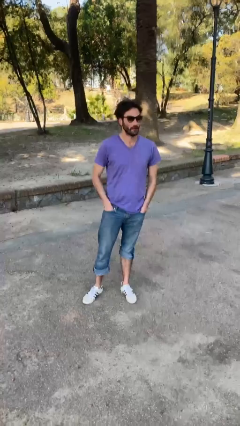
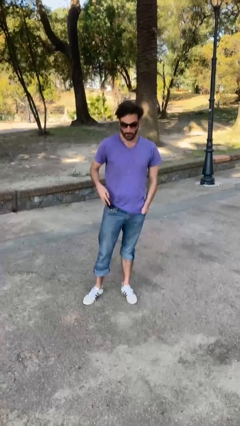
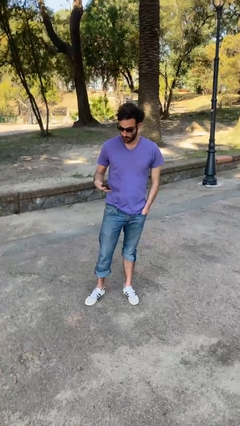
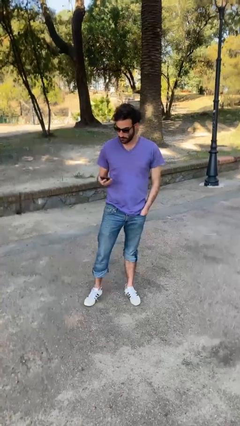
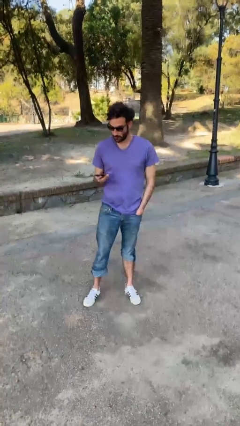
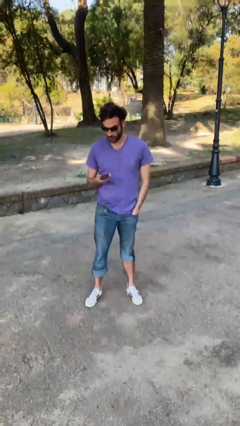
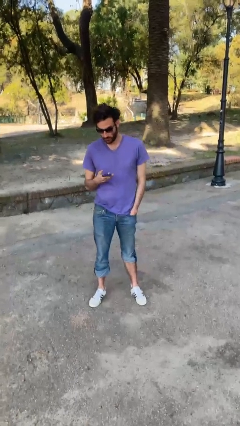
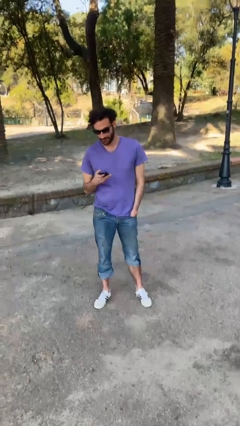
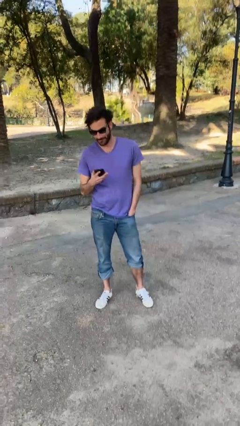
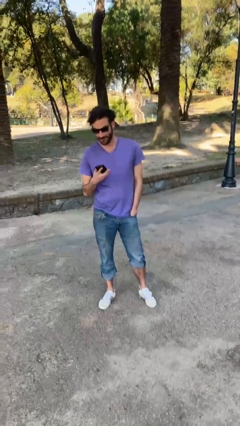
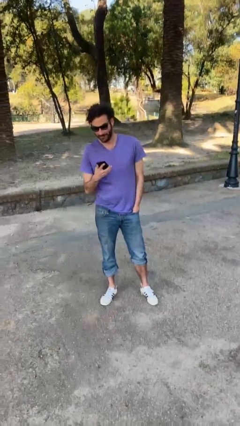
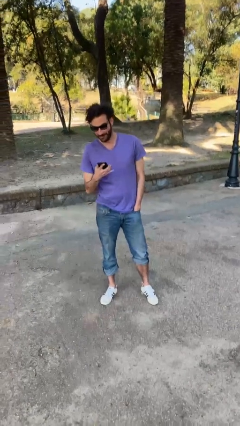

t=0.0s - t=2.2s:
person takes phone from pocket

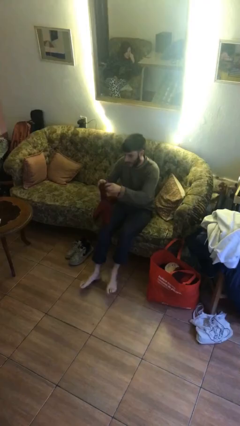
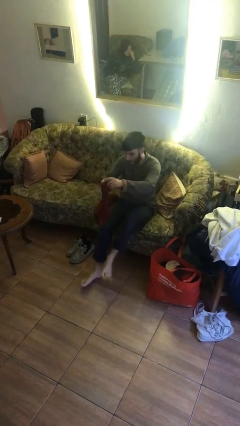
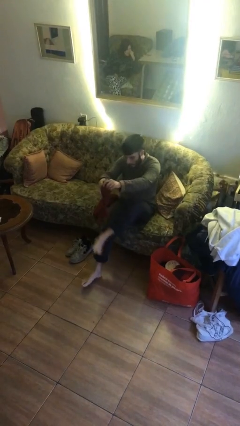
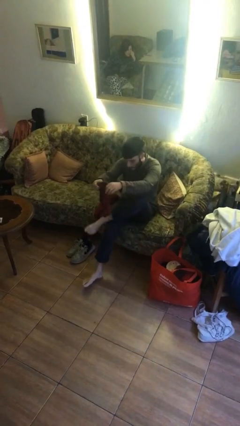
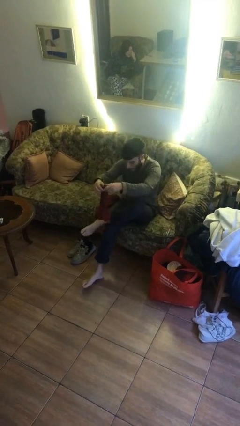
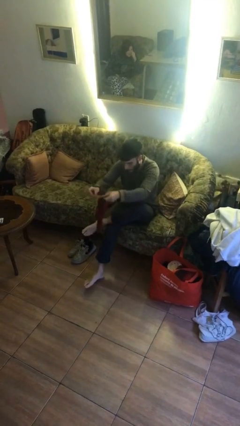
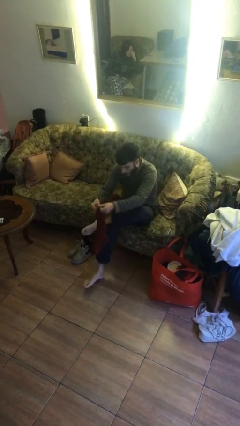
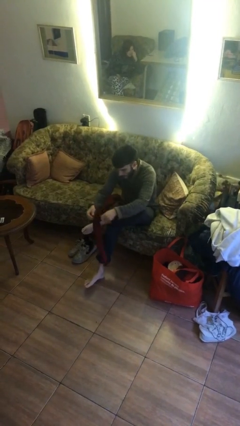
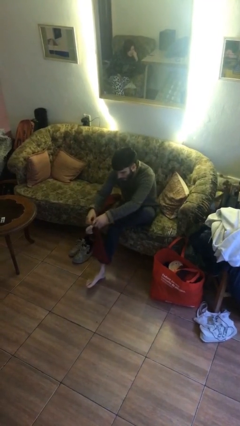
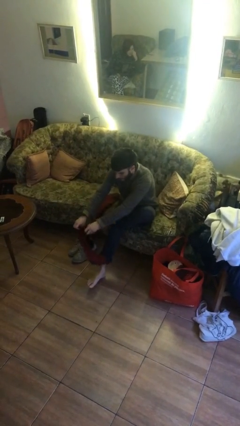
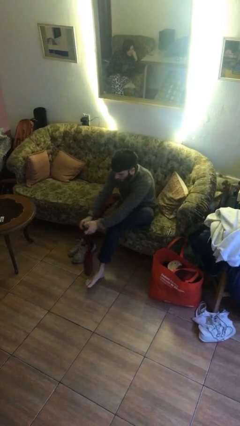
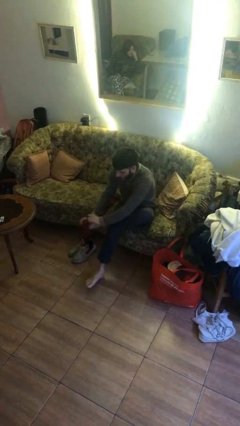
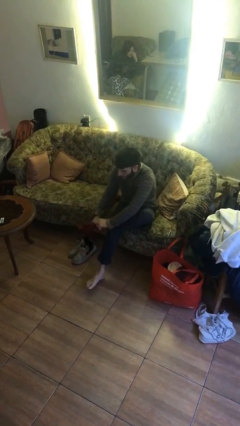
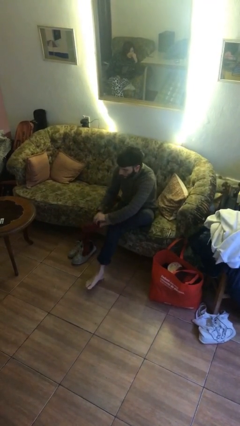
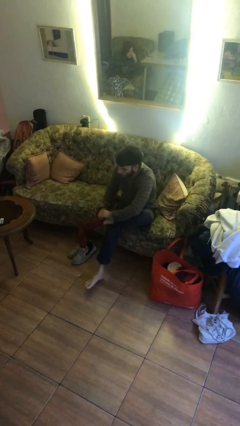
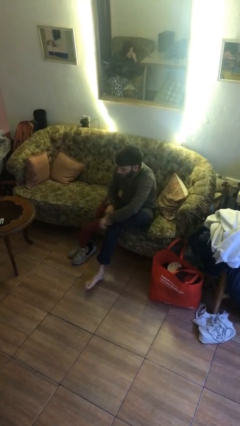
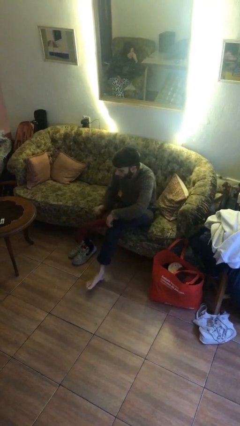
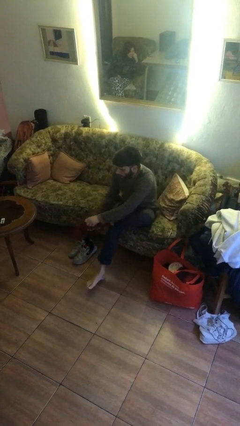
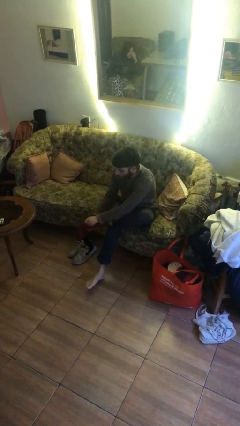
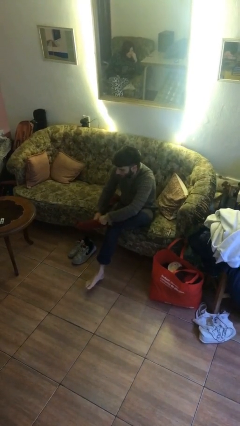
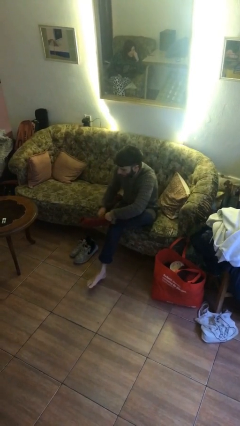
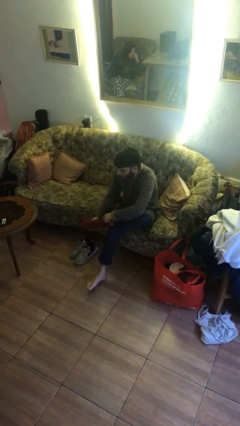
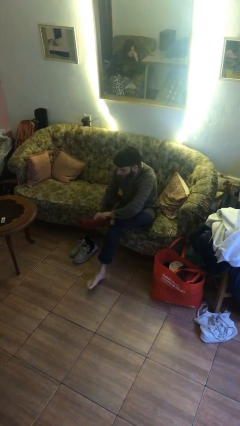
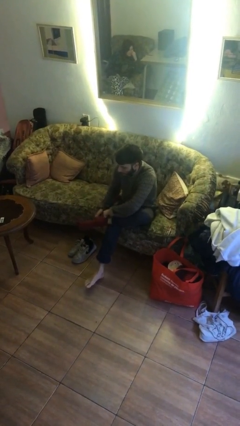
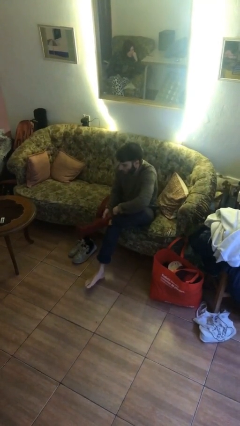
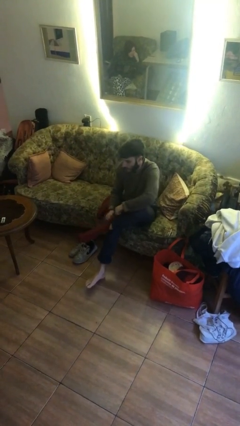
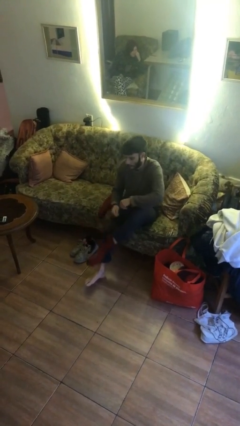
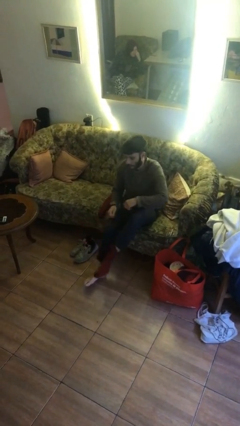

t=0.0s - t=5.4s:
person puts on socks

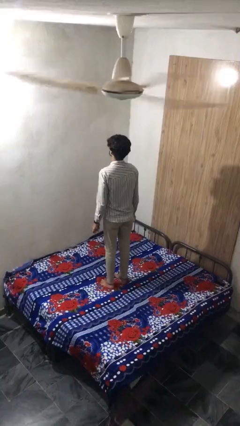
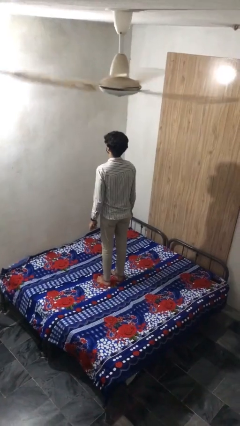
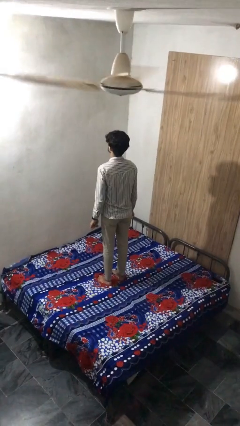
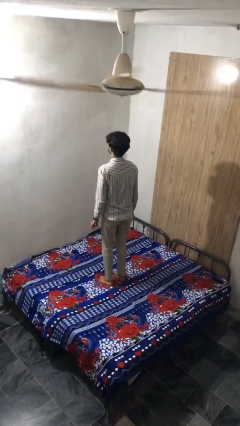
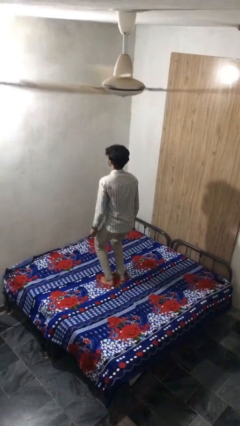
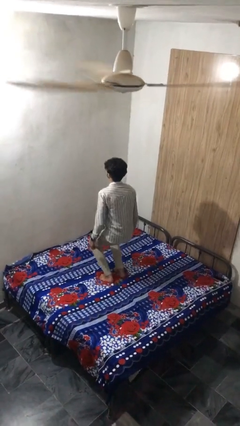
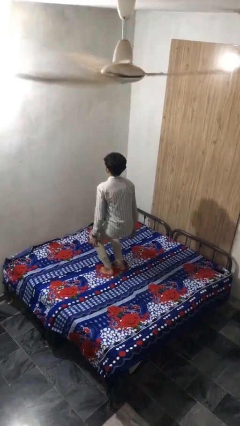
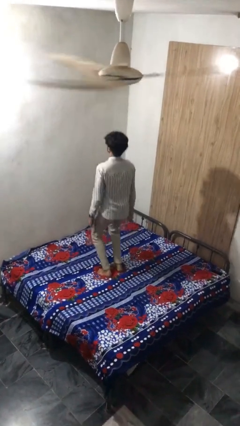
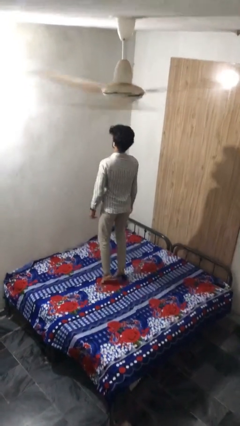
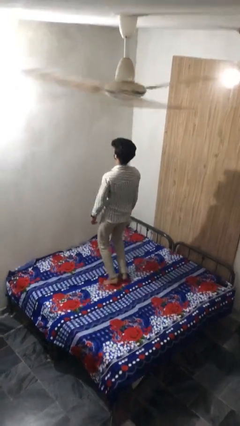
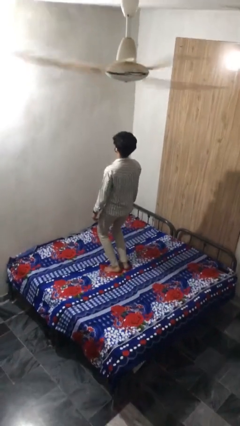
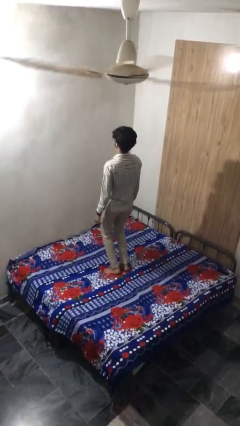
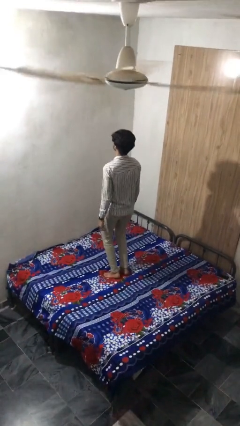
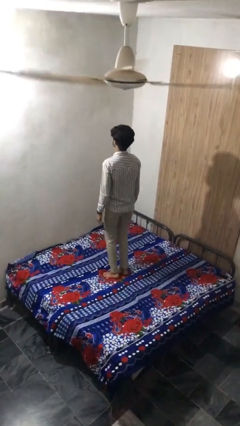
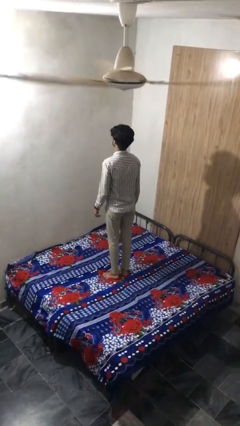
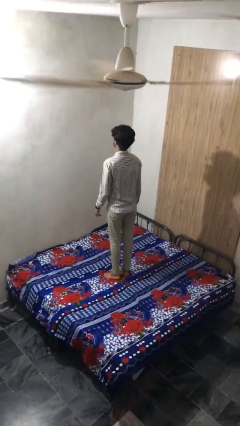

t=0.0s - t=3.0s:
person jumps on bed

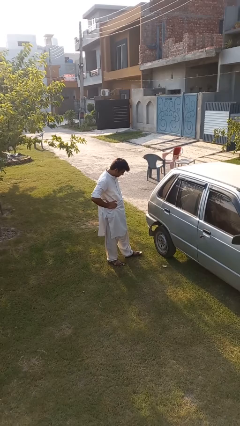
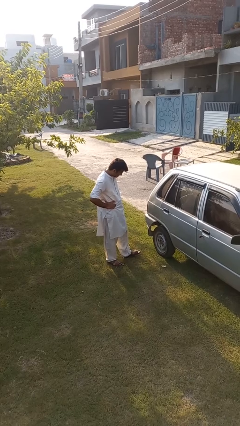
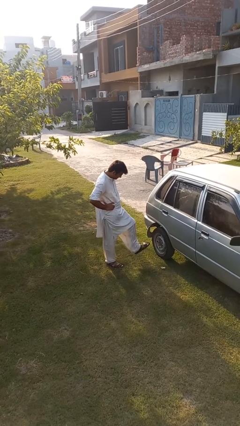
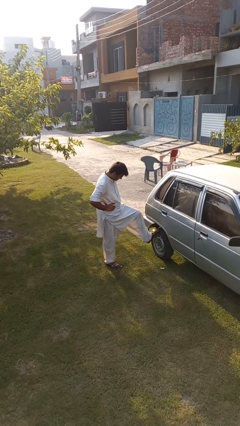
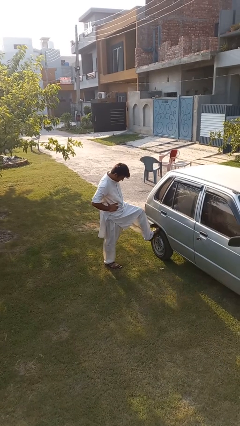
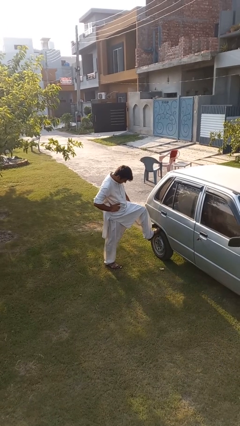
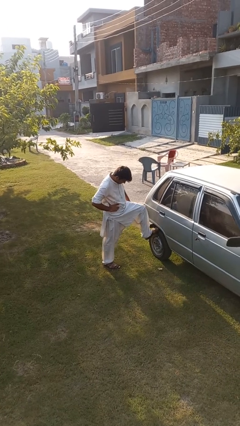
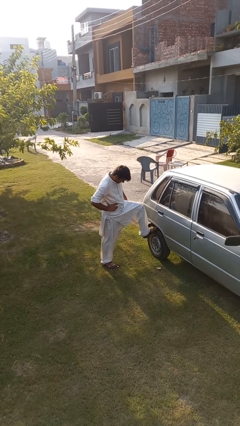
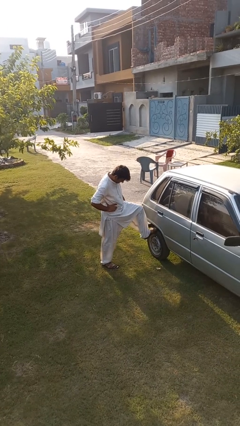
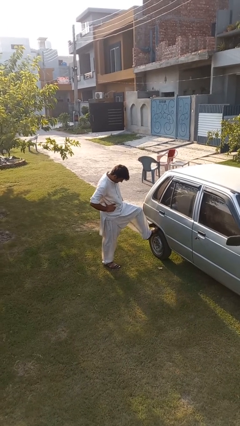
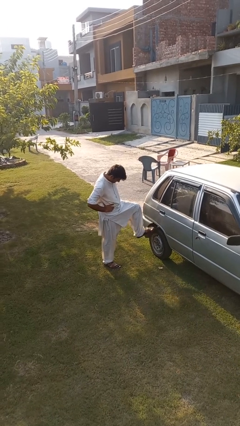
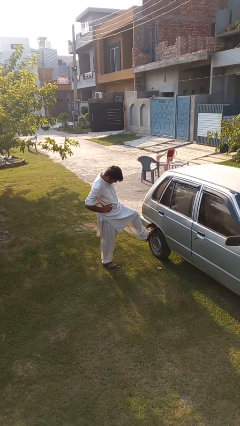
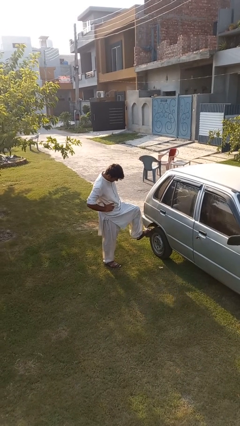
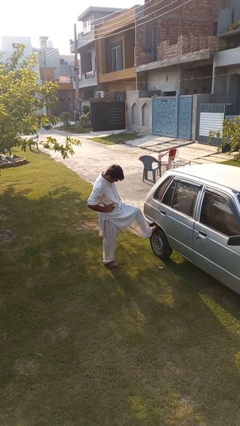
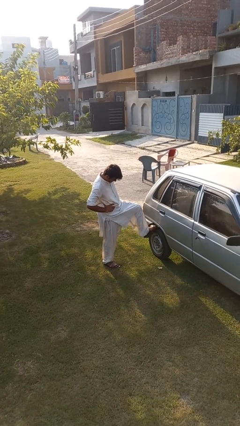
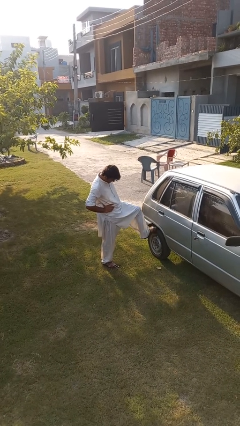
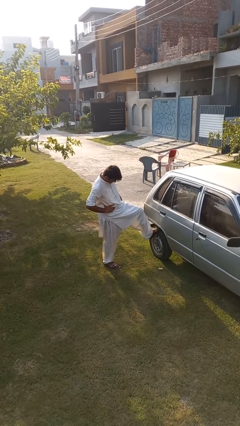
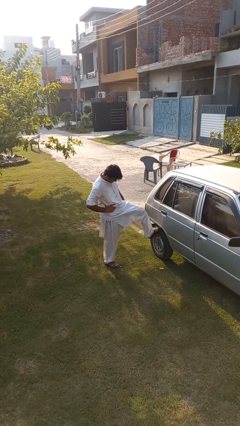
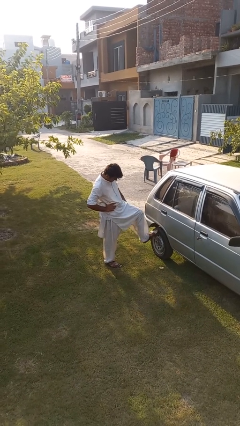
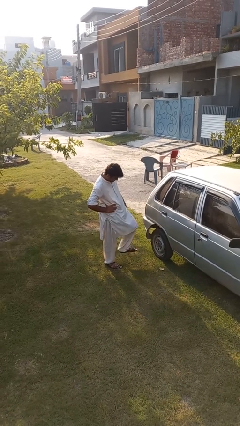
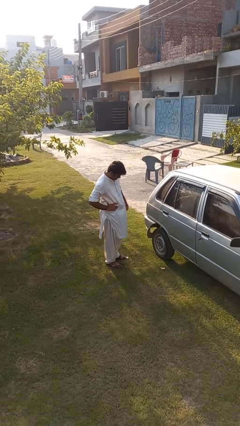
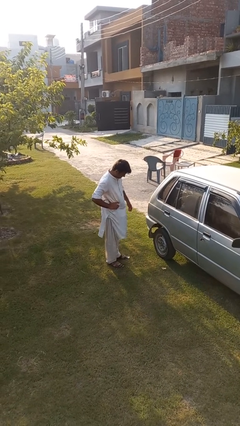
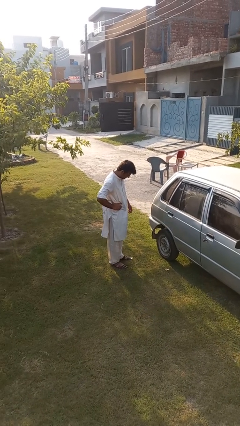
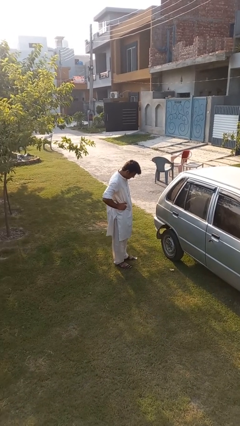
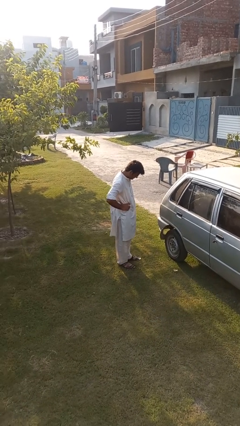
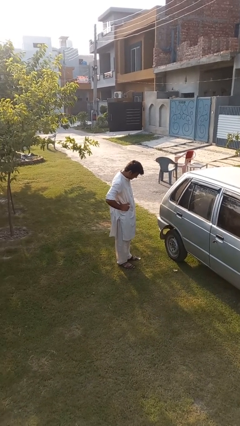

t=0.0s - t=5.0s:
person kicks car tires

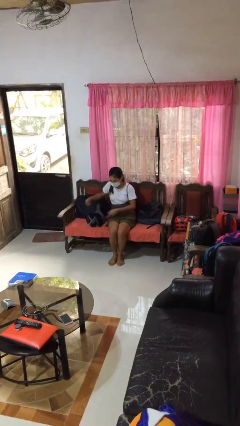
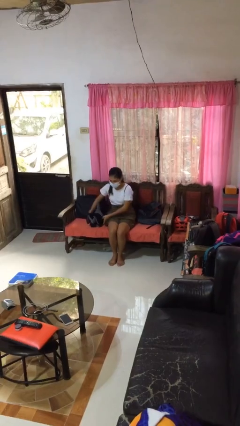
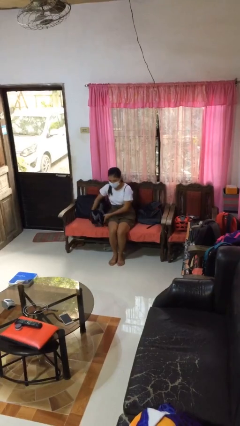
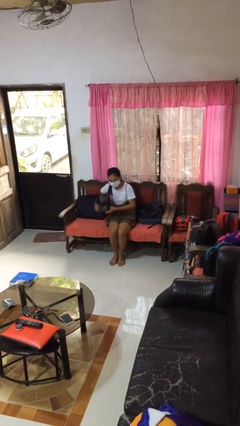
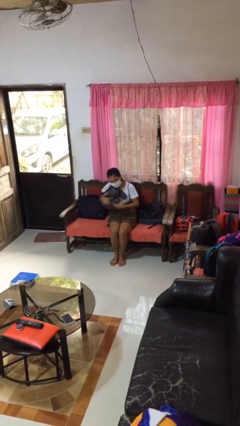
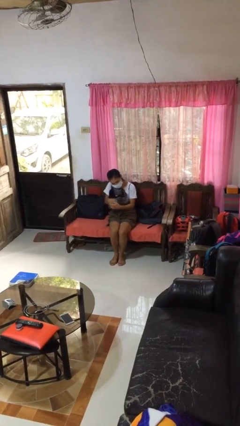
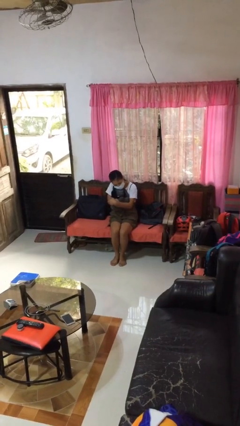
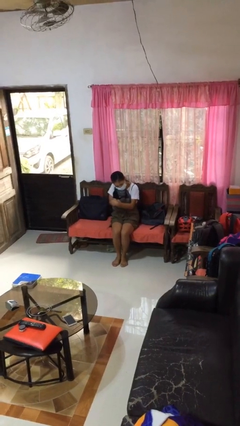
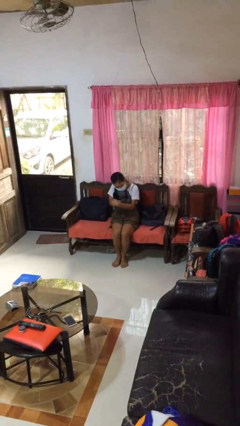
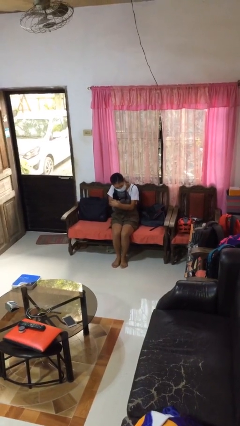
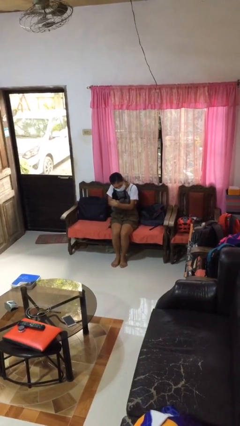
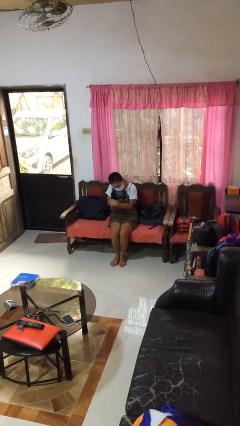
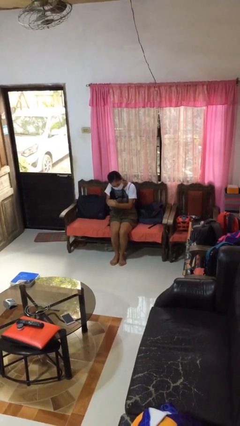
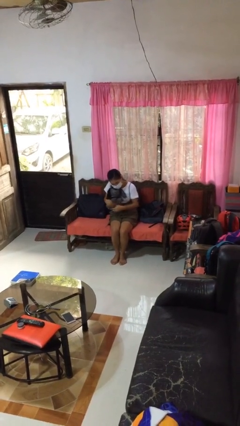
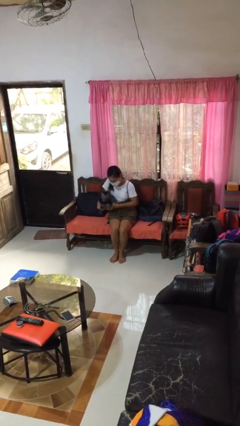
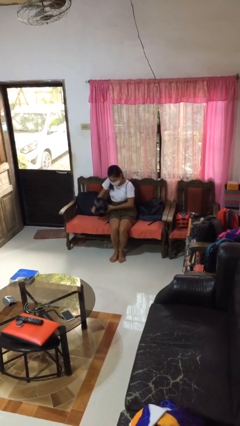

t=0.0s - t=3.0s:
person hugs stuffed animal
